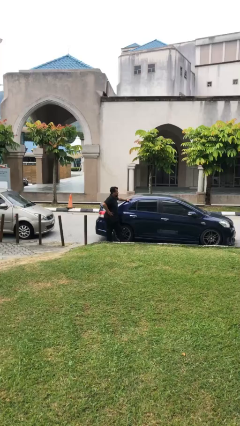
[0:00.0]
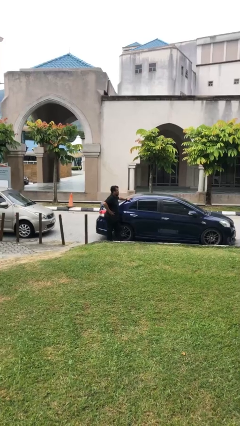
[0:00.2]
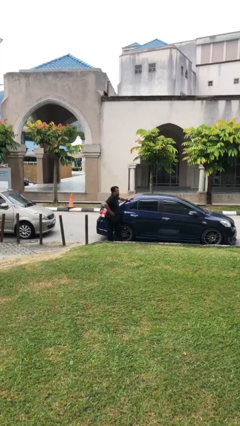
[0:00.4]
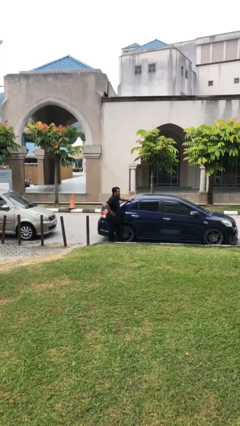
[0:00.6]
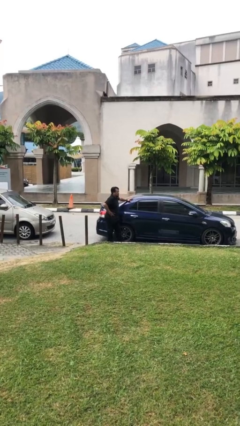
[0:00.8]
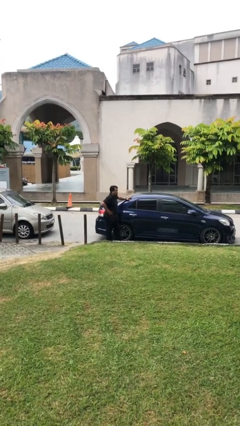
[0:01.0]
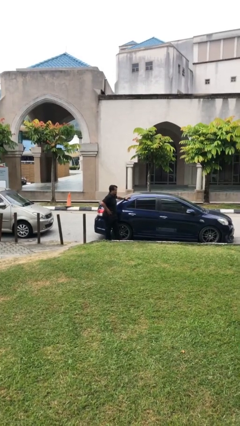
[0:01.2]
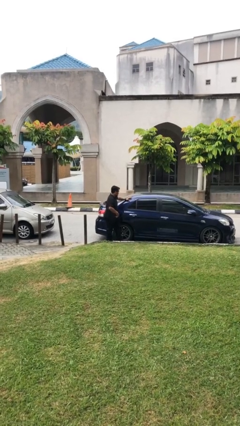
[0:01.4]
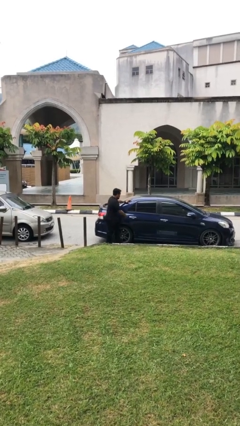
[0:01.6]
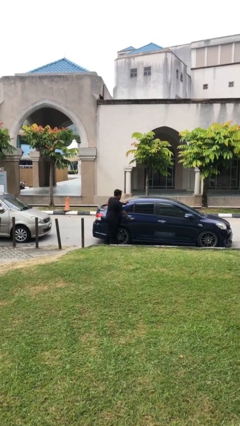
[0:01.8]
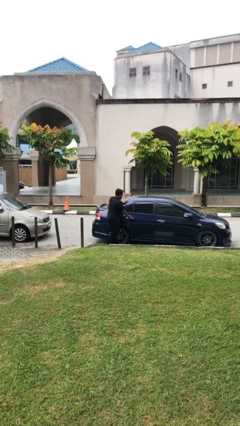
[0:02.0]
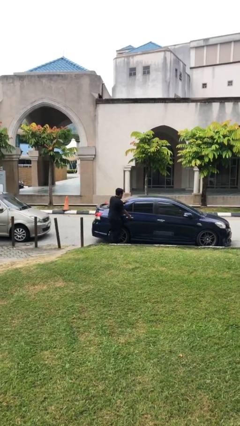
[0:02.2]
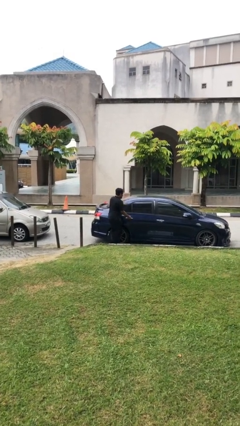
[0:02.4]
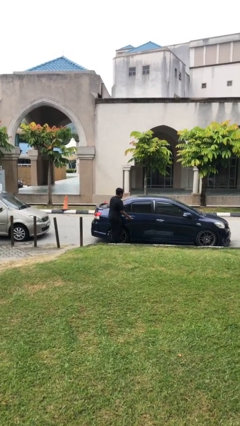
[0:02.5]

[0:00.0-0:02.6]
person opens car door

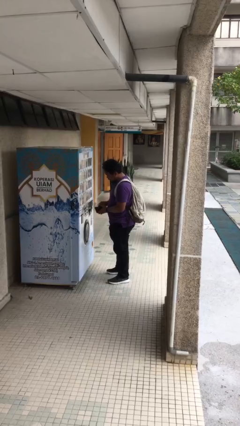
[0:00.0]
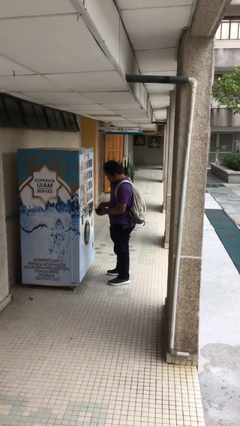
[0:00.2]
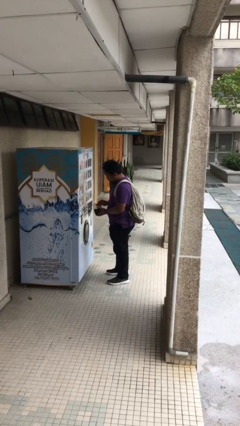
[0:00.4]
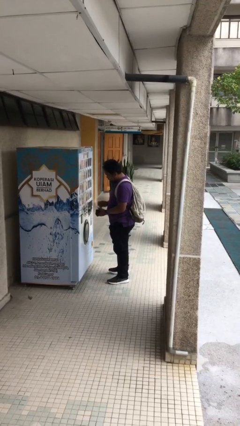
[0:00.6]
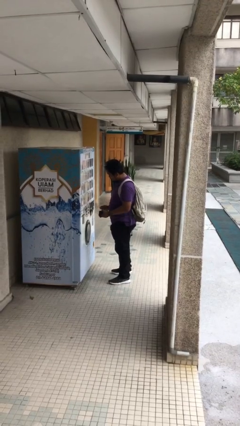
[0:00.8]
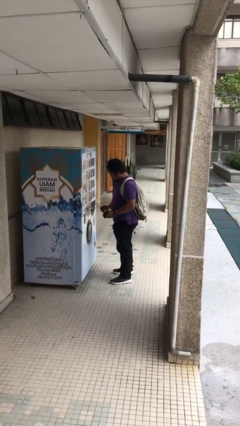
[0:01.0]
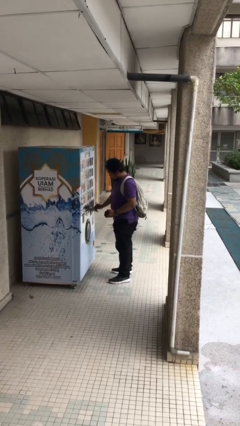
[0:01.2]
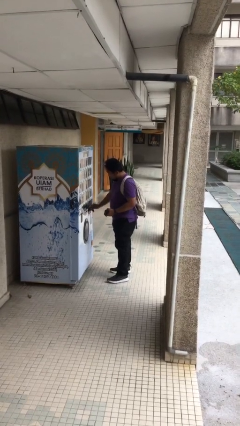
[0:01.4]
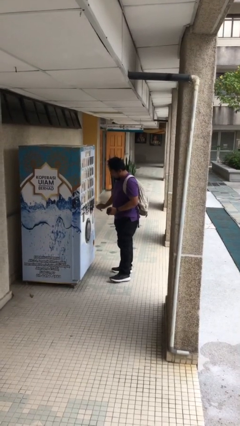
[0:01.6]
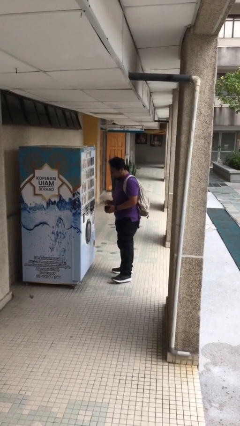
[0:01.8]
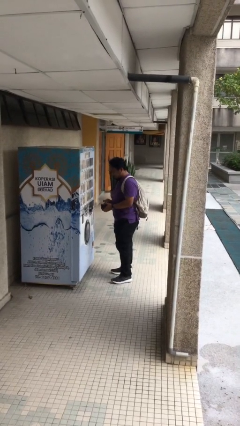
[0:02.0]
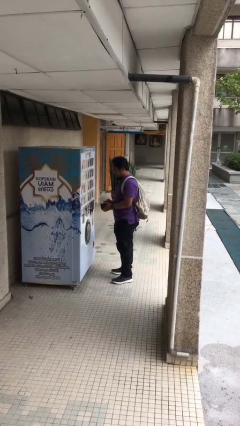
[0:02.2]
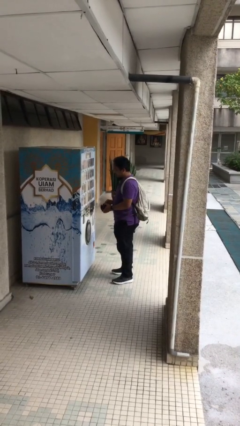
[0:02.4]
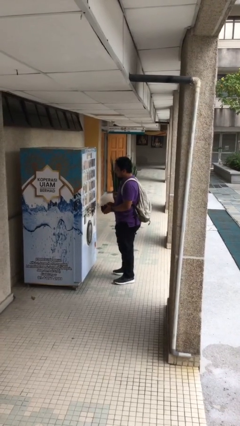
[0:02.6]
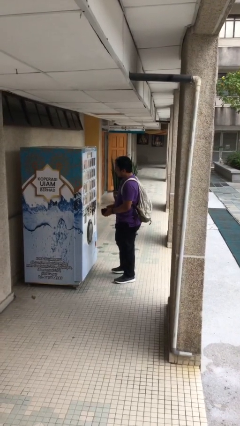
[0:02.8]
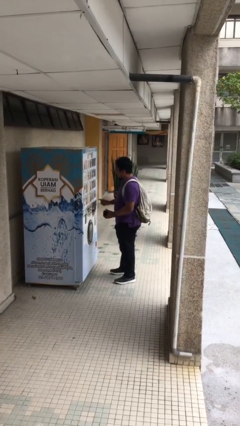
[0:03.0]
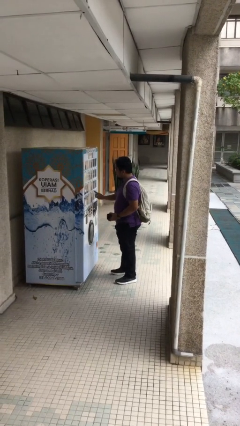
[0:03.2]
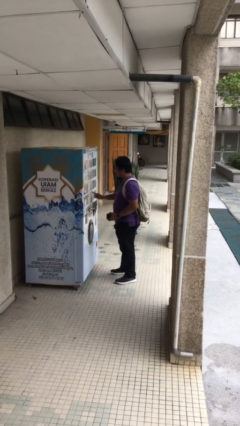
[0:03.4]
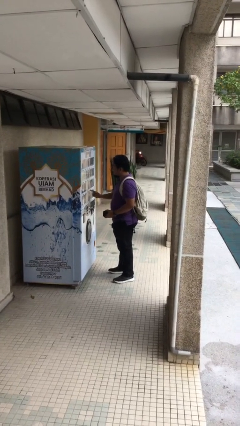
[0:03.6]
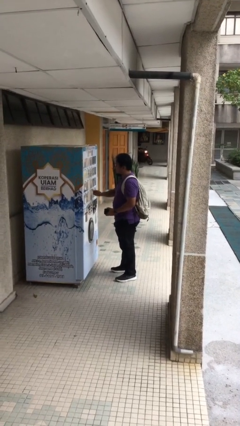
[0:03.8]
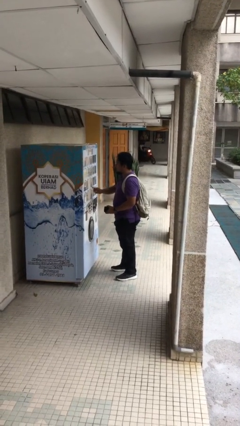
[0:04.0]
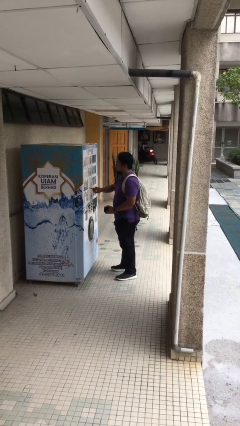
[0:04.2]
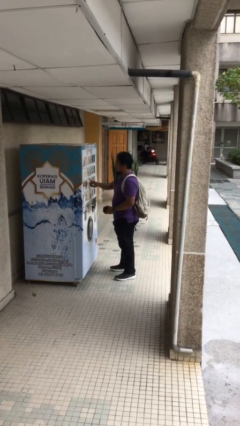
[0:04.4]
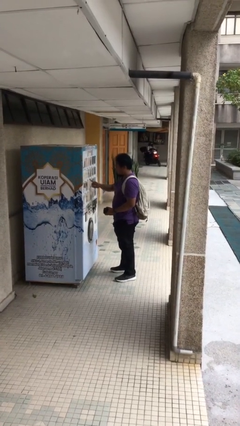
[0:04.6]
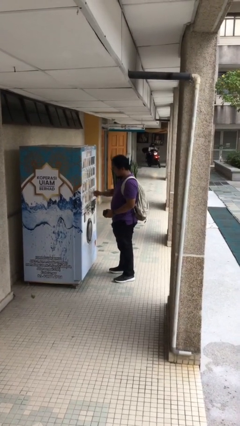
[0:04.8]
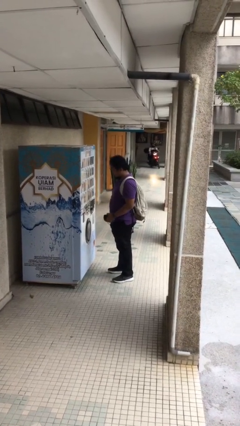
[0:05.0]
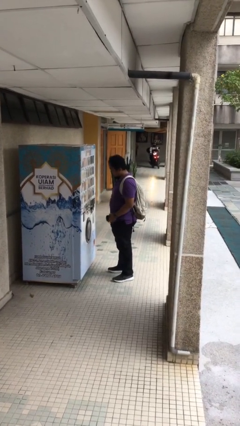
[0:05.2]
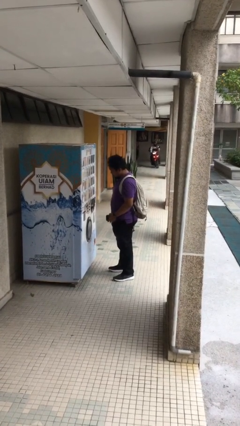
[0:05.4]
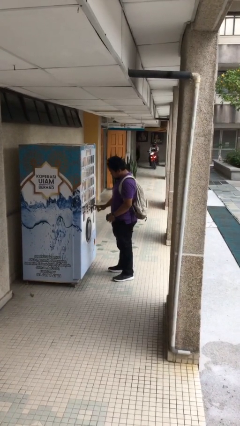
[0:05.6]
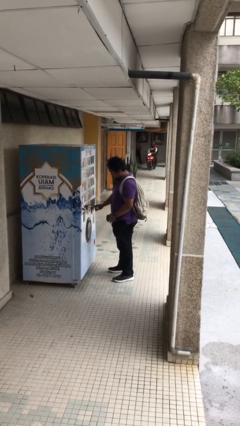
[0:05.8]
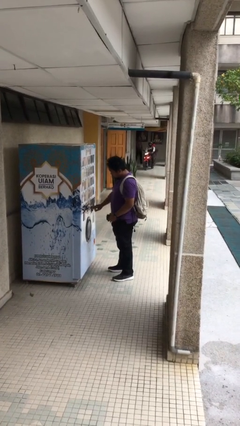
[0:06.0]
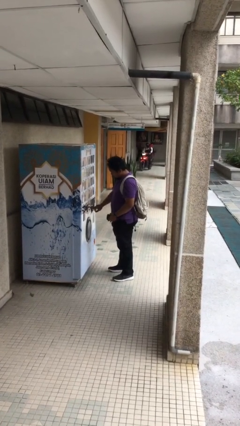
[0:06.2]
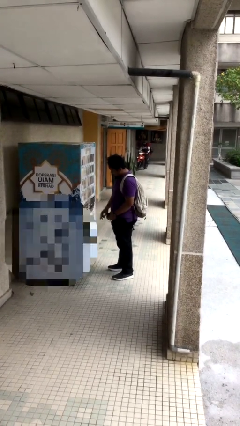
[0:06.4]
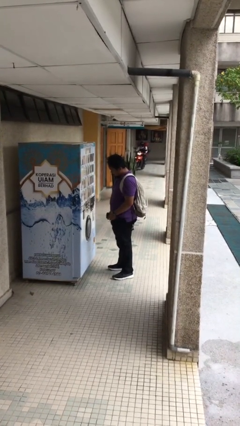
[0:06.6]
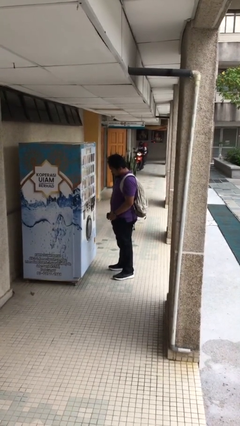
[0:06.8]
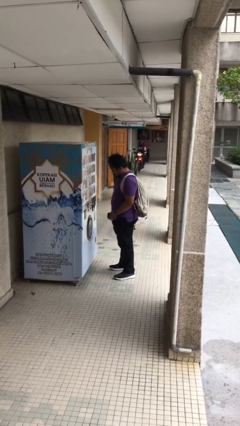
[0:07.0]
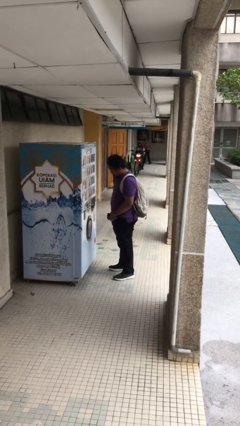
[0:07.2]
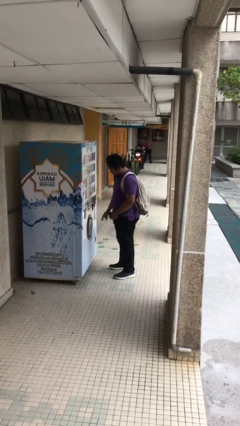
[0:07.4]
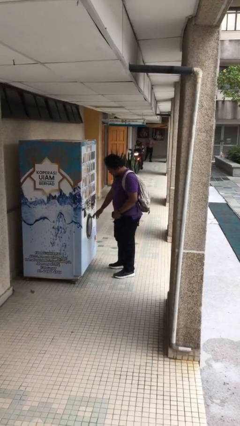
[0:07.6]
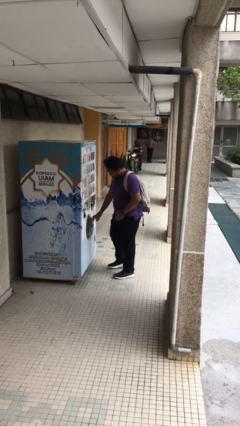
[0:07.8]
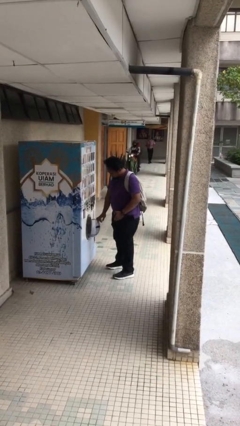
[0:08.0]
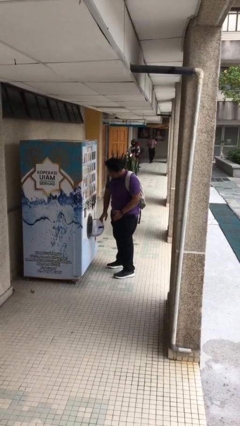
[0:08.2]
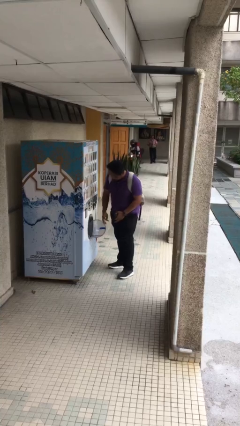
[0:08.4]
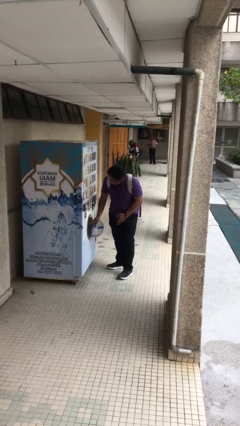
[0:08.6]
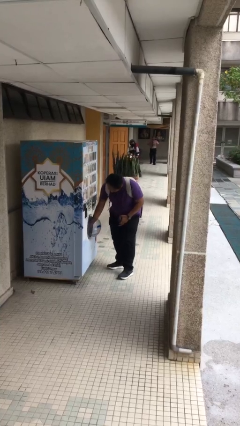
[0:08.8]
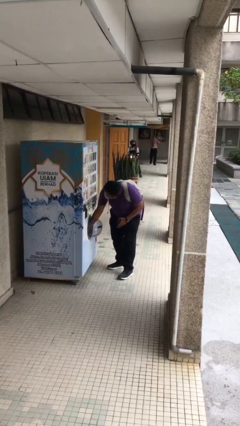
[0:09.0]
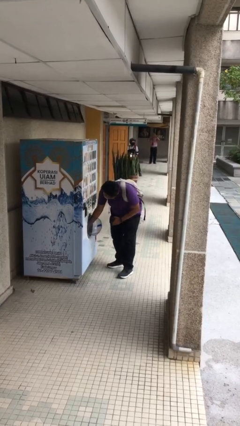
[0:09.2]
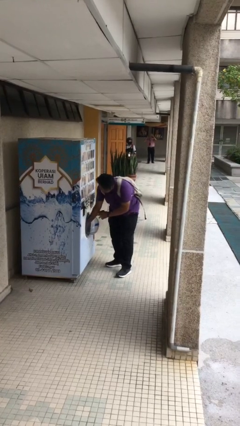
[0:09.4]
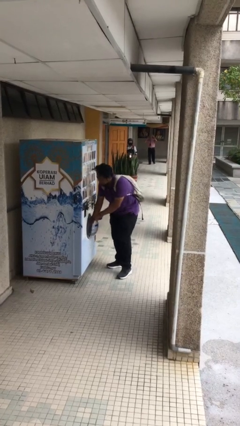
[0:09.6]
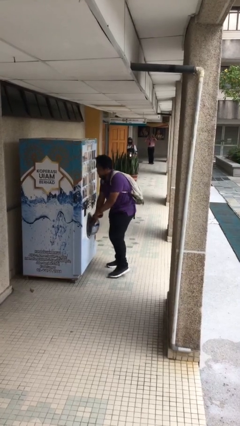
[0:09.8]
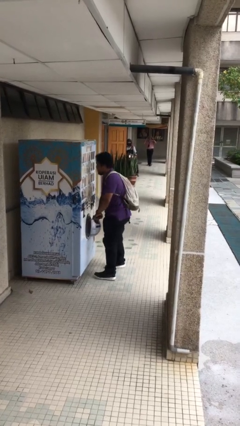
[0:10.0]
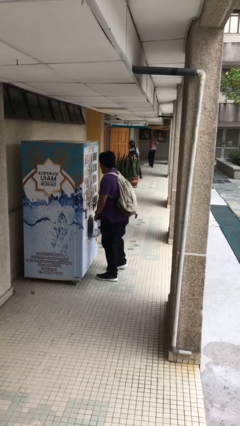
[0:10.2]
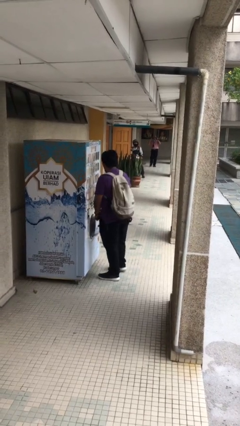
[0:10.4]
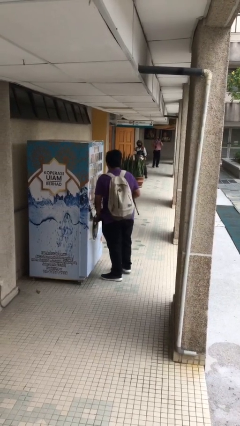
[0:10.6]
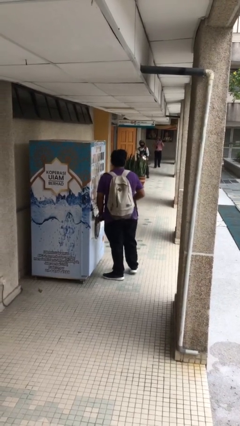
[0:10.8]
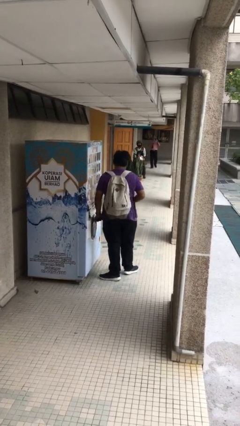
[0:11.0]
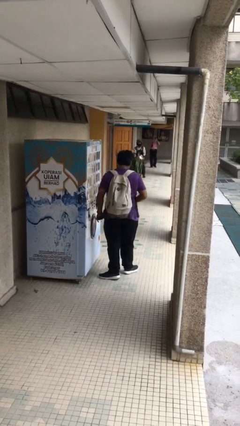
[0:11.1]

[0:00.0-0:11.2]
person purchases from machine

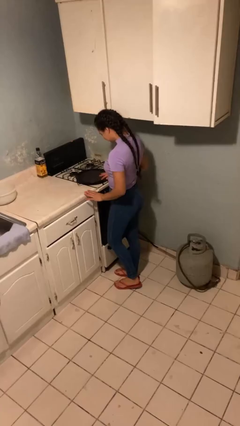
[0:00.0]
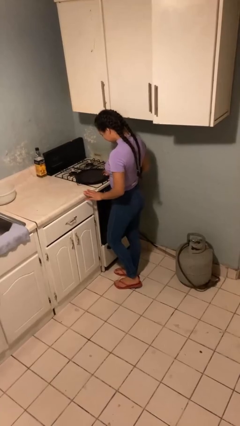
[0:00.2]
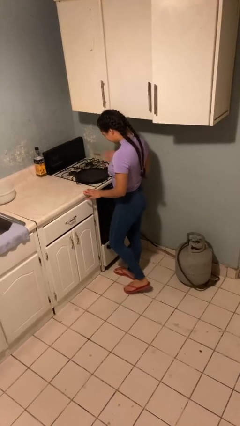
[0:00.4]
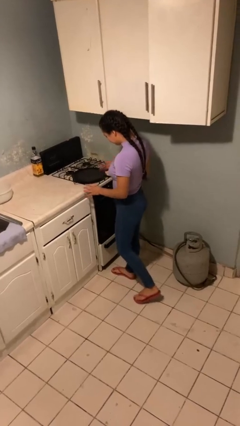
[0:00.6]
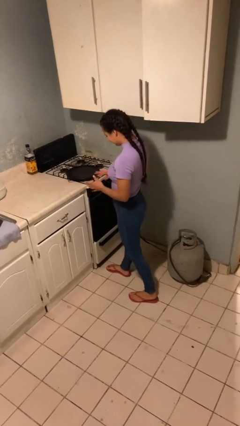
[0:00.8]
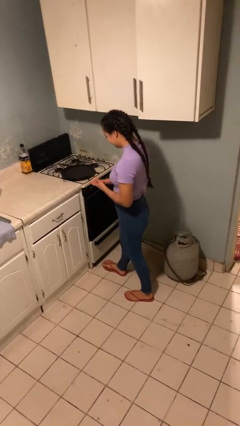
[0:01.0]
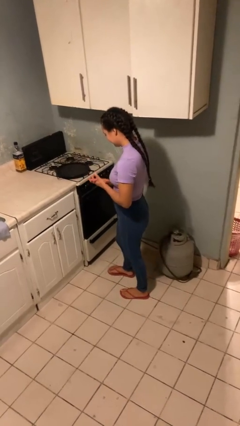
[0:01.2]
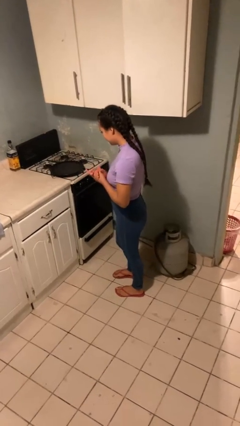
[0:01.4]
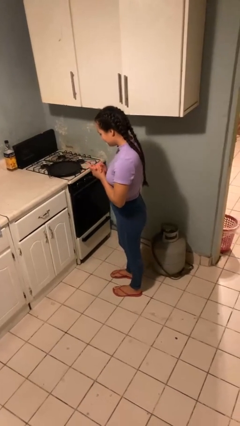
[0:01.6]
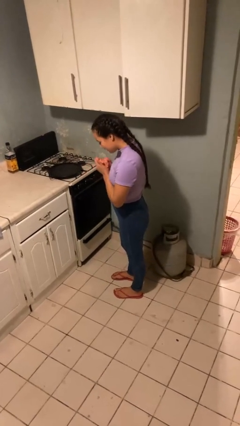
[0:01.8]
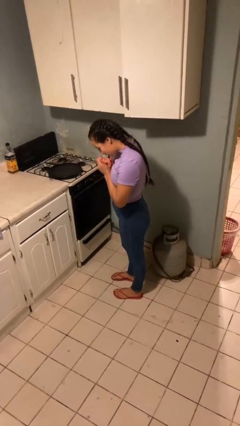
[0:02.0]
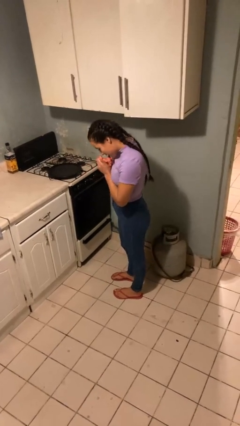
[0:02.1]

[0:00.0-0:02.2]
person burns hand

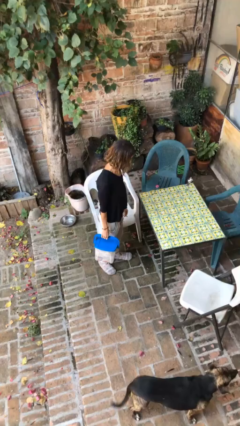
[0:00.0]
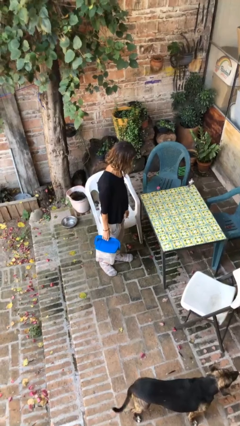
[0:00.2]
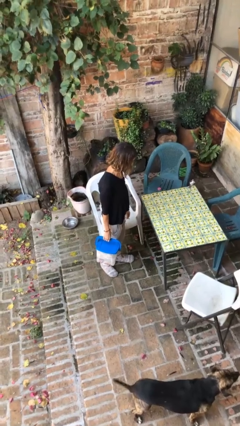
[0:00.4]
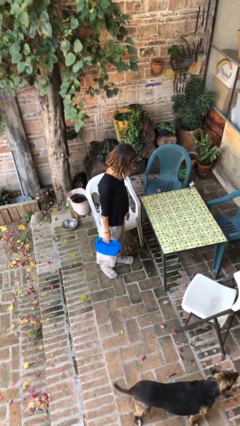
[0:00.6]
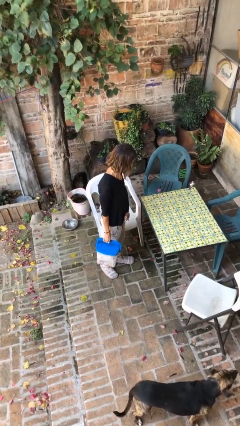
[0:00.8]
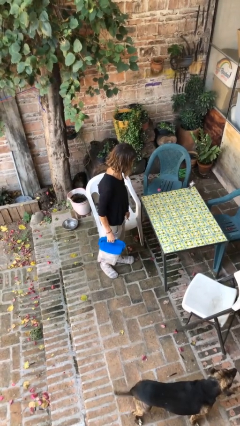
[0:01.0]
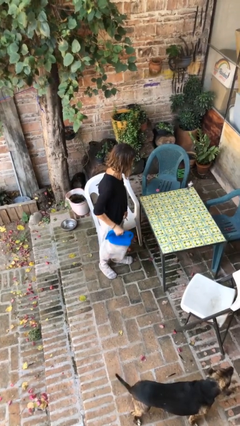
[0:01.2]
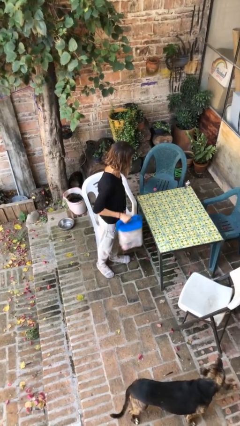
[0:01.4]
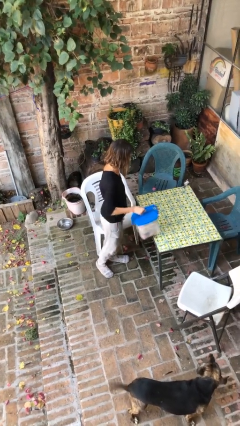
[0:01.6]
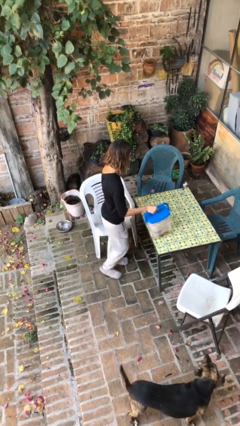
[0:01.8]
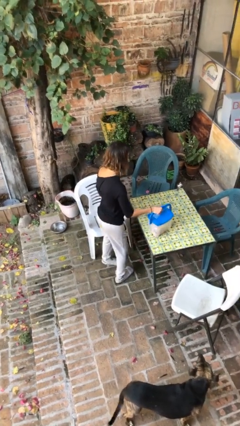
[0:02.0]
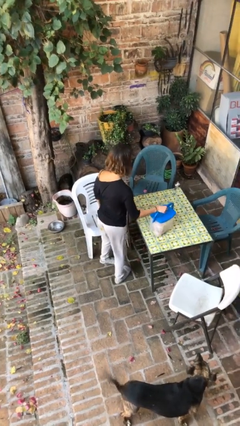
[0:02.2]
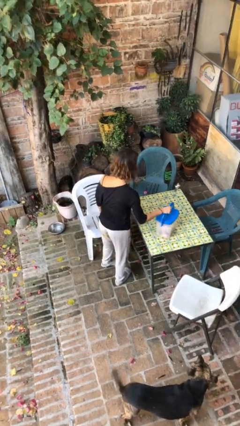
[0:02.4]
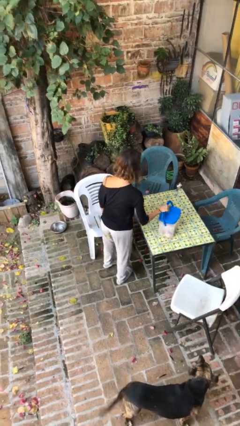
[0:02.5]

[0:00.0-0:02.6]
person puts down object on table
